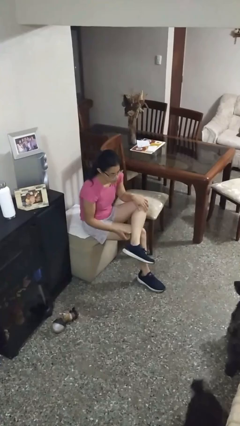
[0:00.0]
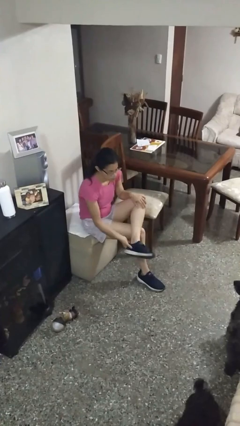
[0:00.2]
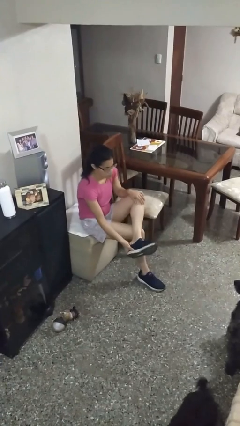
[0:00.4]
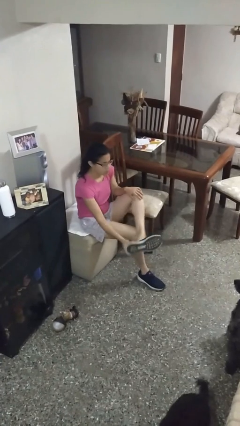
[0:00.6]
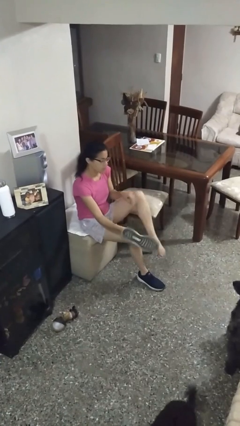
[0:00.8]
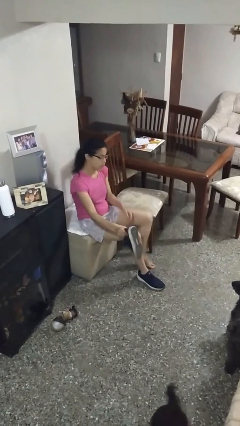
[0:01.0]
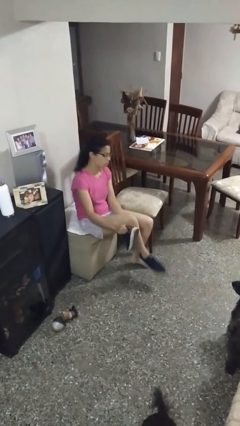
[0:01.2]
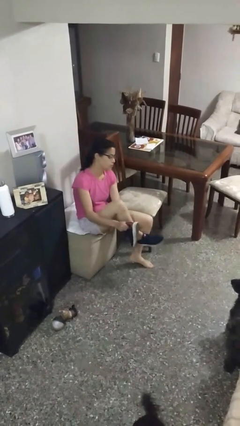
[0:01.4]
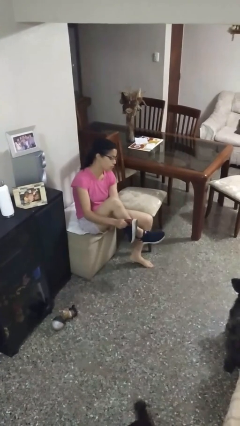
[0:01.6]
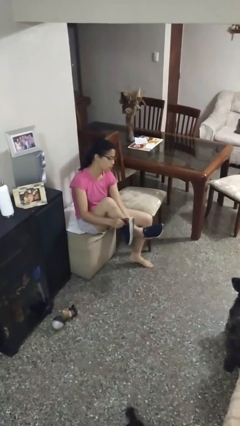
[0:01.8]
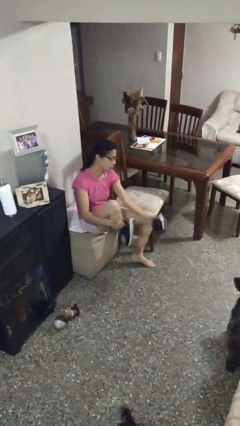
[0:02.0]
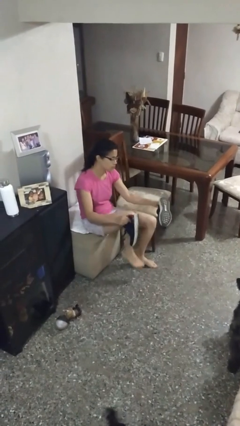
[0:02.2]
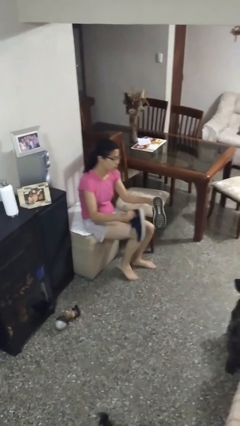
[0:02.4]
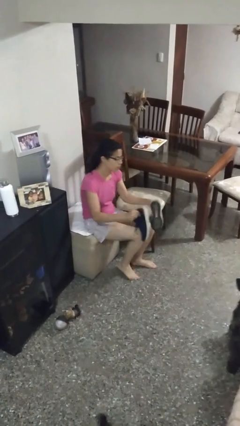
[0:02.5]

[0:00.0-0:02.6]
person takes off shoes

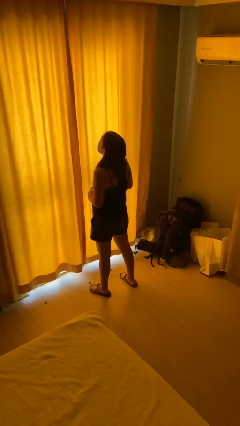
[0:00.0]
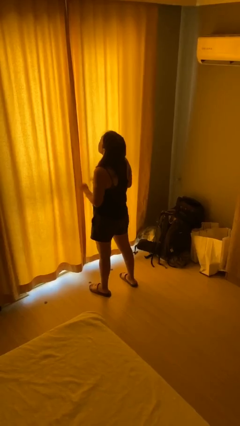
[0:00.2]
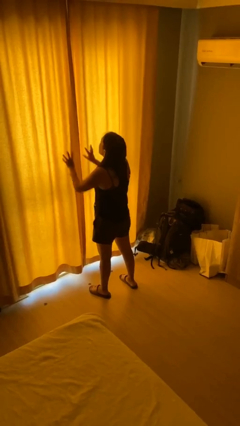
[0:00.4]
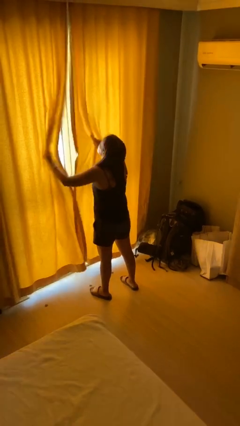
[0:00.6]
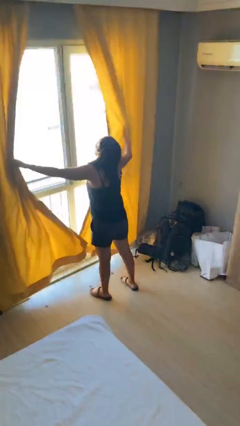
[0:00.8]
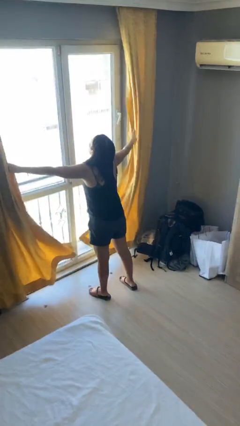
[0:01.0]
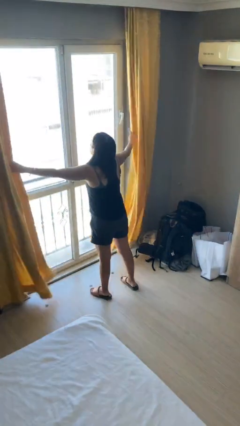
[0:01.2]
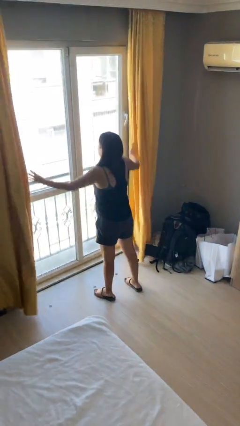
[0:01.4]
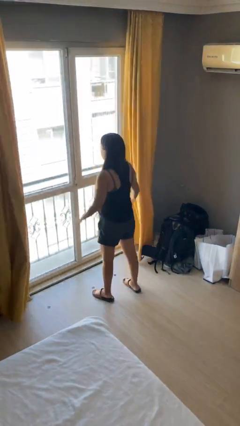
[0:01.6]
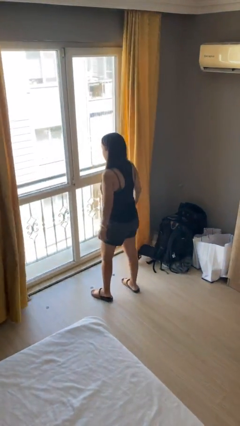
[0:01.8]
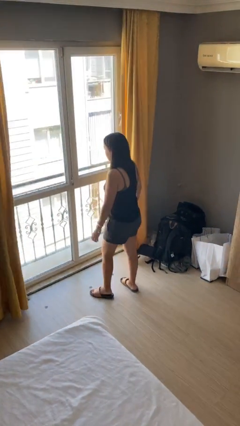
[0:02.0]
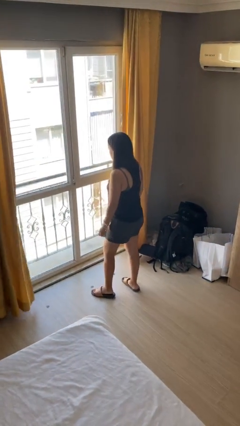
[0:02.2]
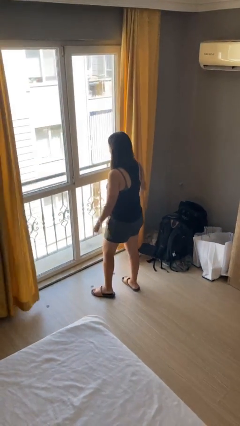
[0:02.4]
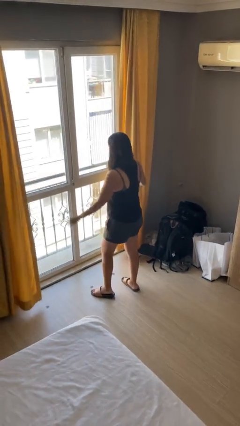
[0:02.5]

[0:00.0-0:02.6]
person opens curtains

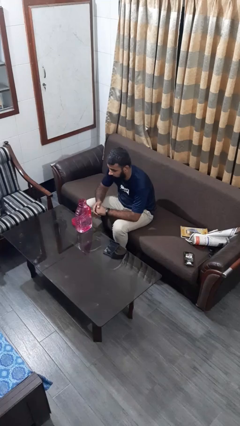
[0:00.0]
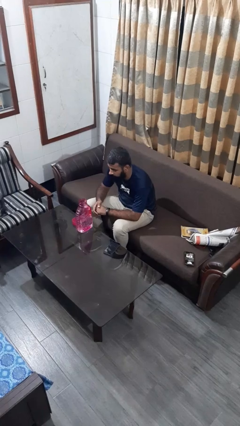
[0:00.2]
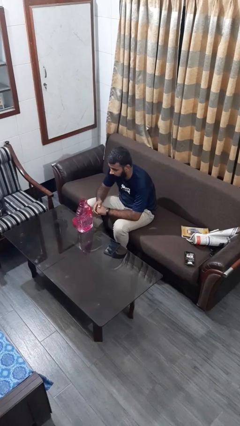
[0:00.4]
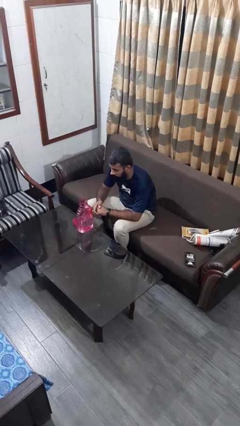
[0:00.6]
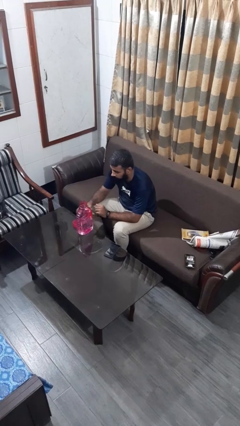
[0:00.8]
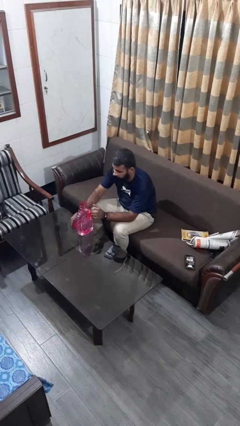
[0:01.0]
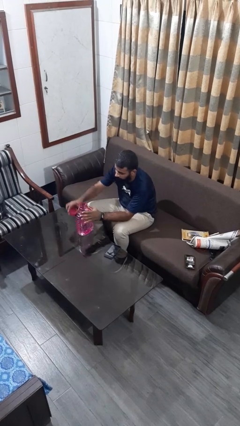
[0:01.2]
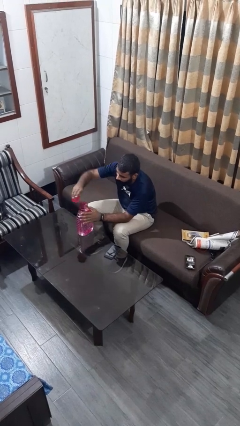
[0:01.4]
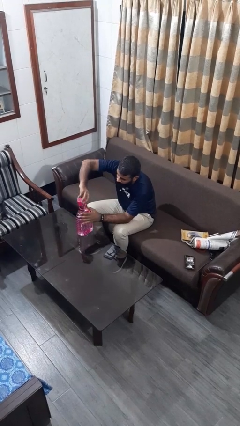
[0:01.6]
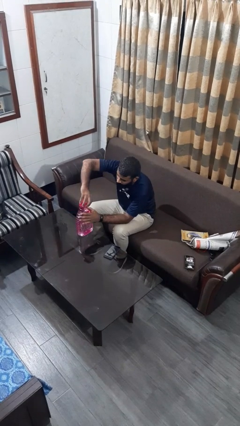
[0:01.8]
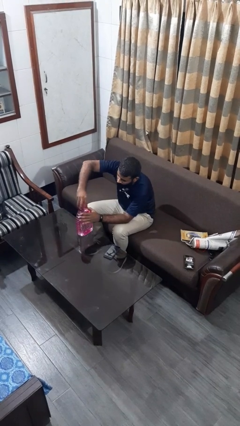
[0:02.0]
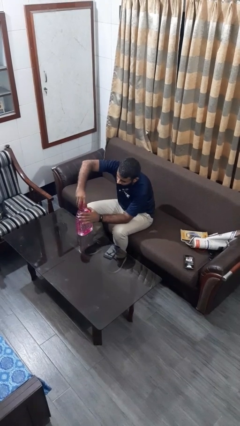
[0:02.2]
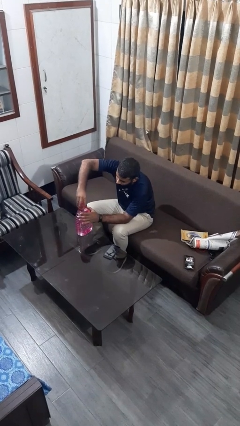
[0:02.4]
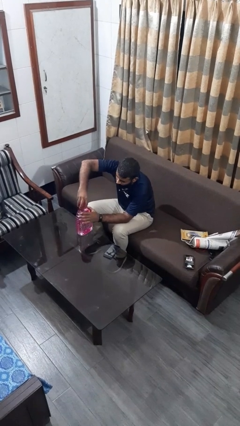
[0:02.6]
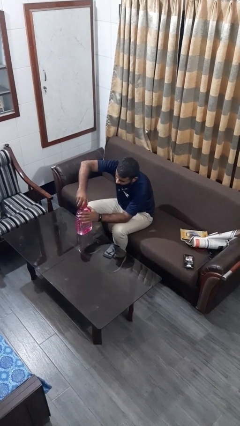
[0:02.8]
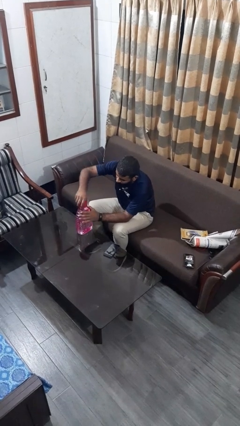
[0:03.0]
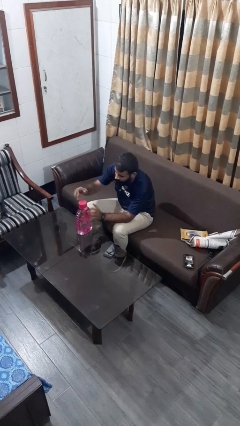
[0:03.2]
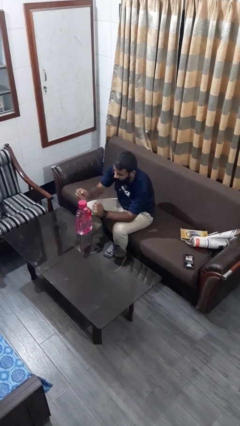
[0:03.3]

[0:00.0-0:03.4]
person screws lid to bottle

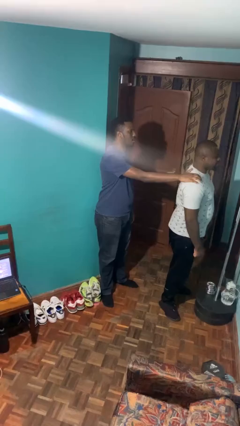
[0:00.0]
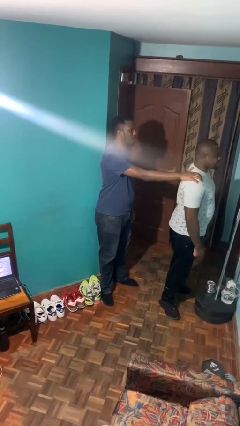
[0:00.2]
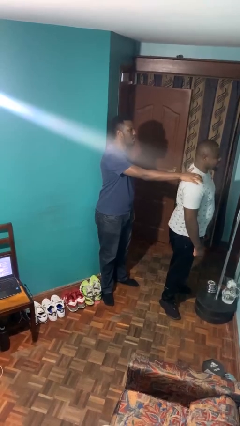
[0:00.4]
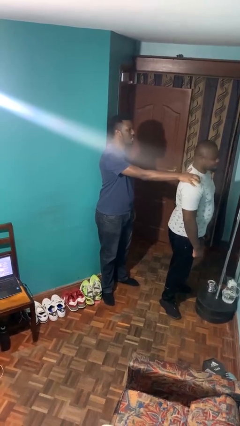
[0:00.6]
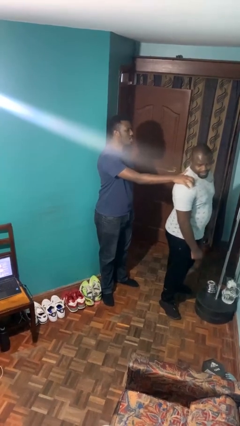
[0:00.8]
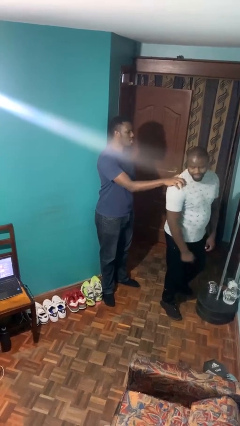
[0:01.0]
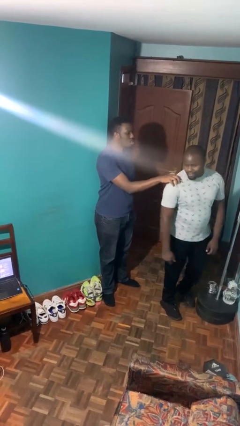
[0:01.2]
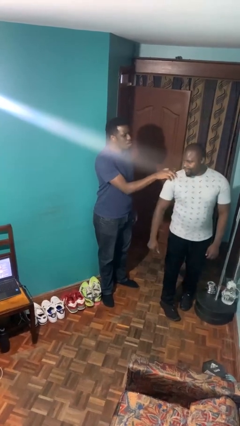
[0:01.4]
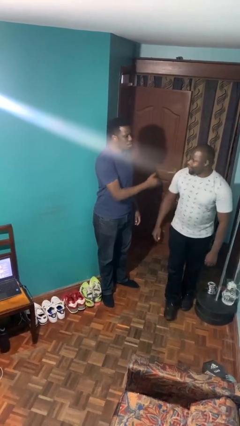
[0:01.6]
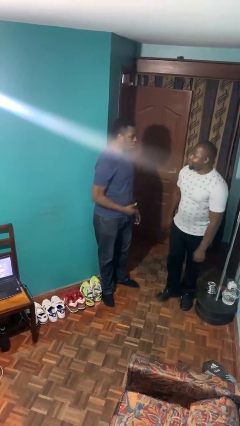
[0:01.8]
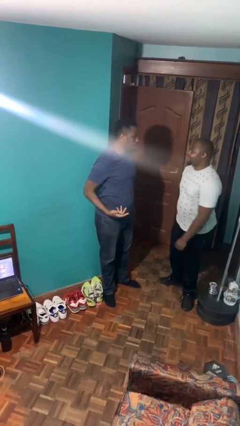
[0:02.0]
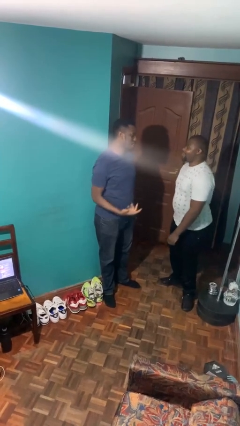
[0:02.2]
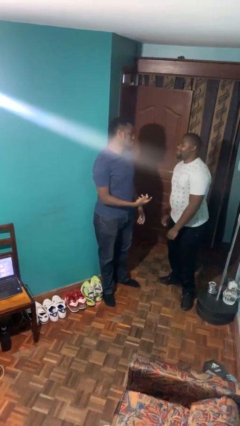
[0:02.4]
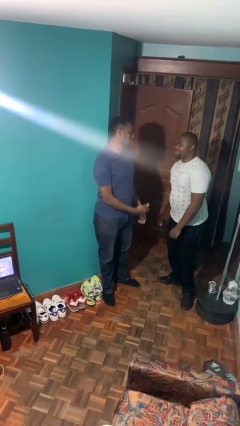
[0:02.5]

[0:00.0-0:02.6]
person spins person around

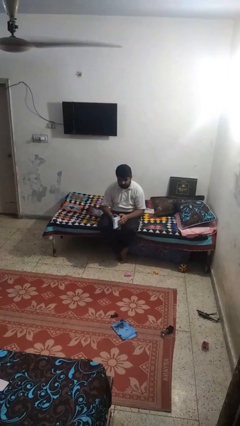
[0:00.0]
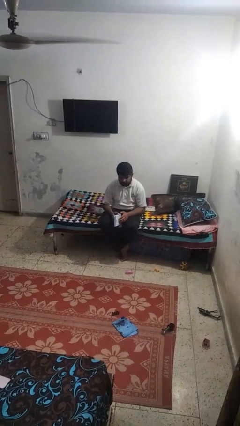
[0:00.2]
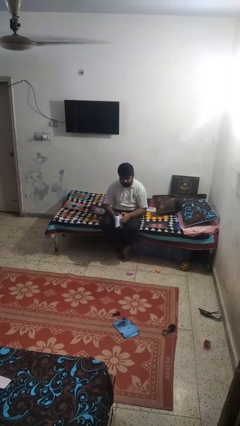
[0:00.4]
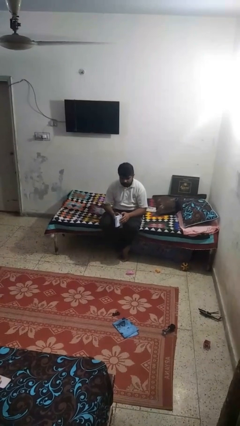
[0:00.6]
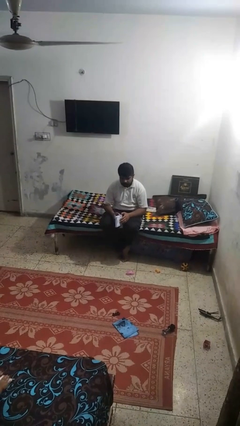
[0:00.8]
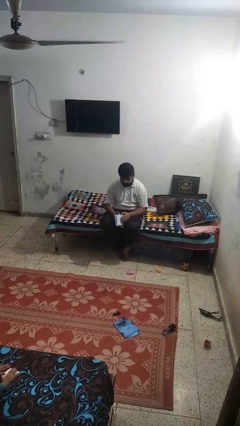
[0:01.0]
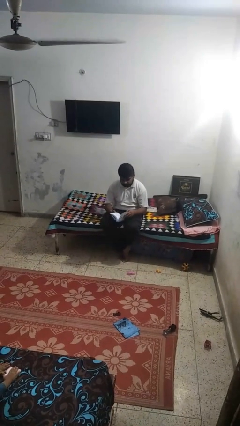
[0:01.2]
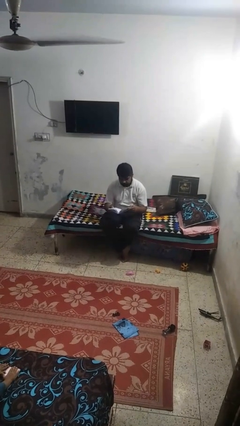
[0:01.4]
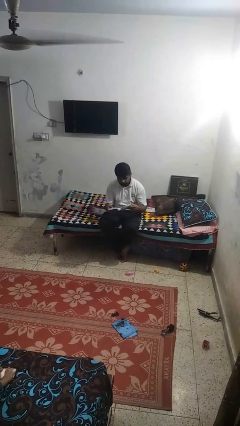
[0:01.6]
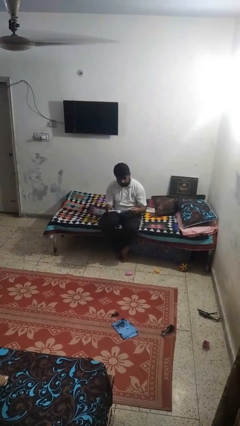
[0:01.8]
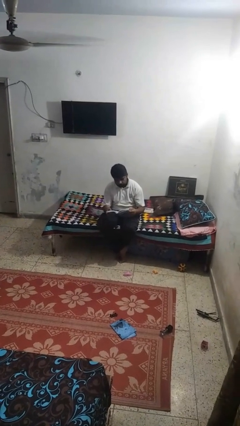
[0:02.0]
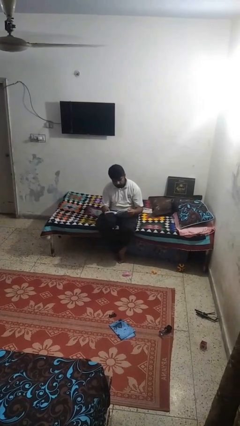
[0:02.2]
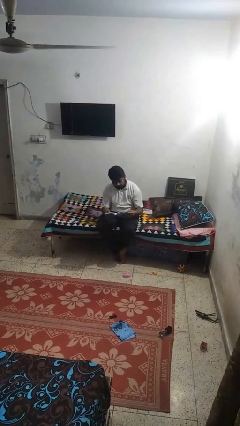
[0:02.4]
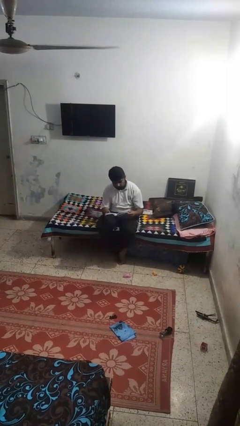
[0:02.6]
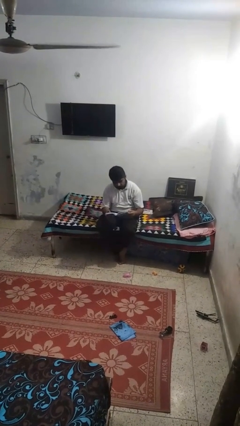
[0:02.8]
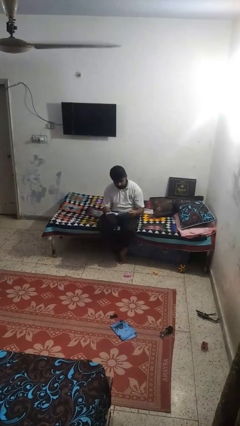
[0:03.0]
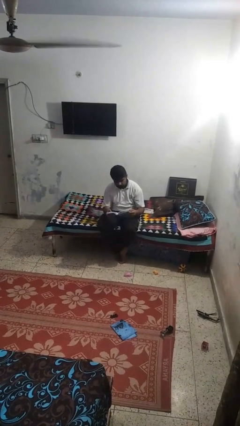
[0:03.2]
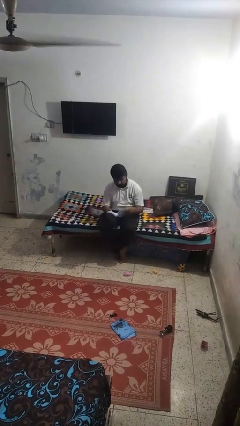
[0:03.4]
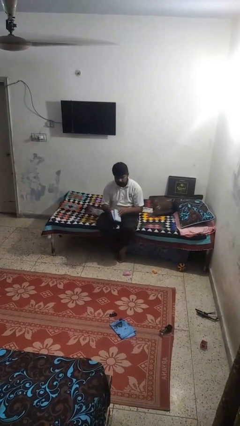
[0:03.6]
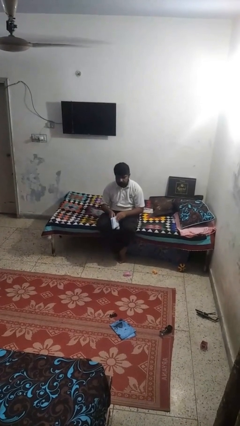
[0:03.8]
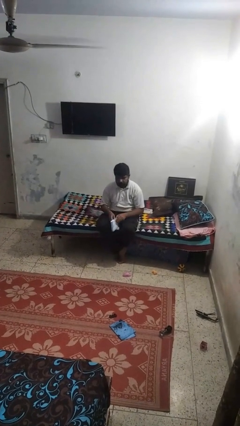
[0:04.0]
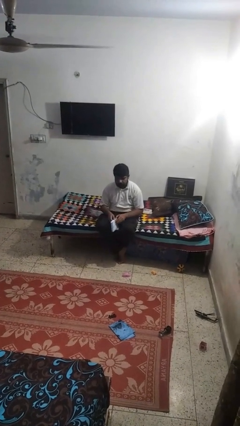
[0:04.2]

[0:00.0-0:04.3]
person reads book

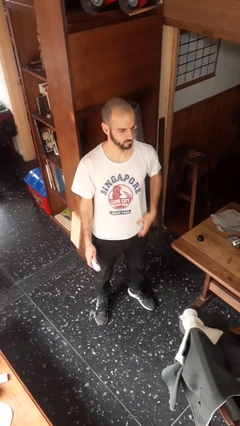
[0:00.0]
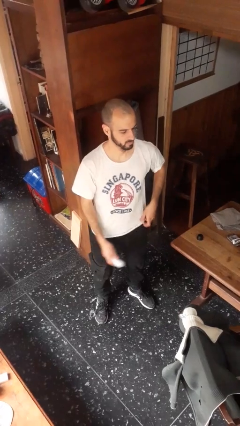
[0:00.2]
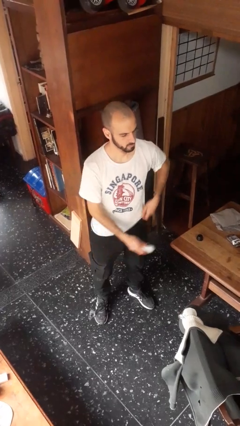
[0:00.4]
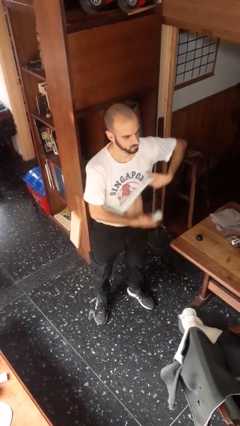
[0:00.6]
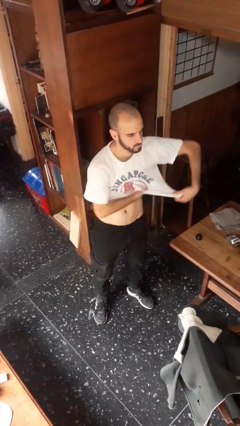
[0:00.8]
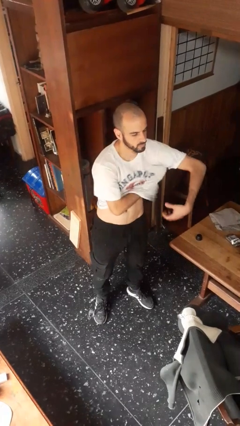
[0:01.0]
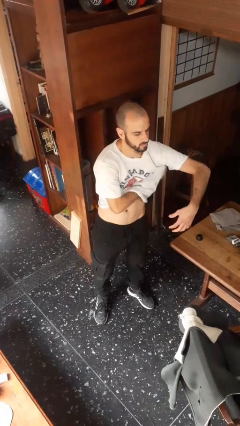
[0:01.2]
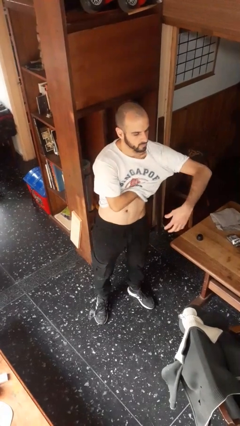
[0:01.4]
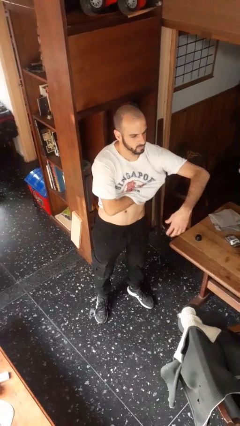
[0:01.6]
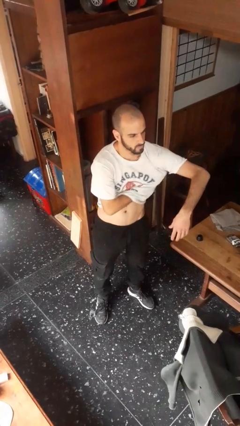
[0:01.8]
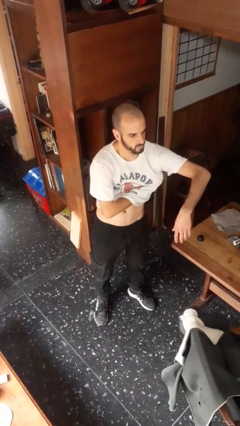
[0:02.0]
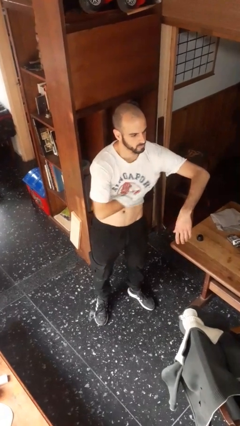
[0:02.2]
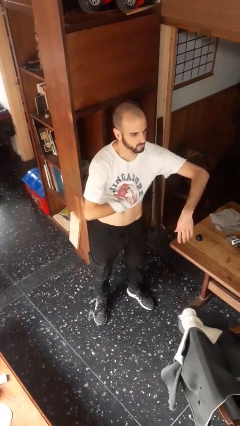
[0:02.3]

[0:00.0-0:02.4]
person applies deodorant
